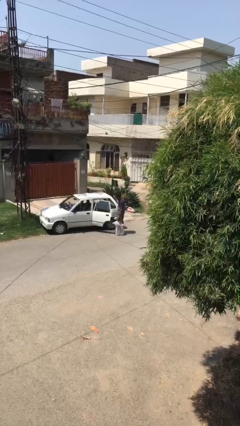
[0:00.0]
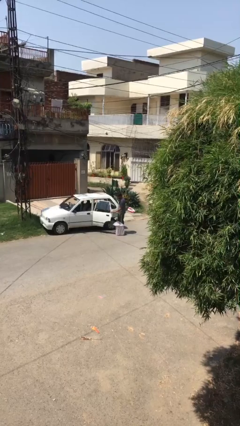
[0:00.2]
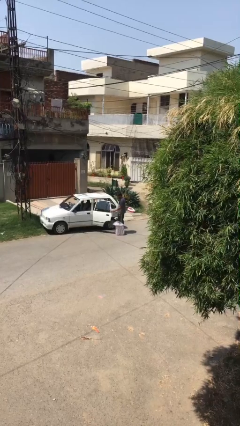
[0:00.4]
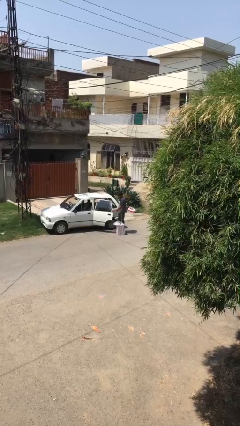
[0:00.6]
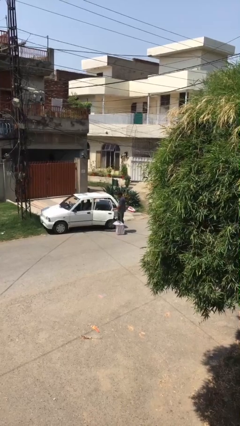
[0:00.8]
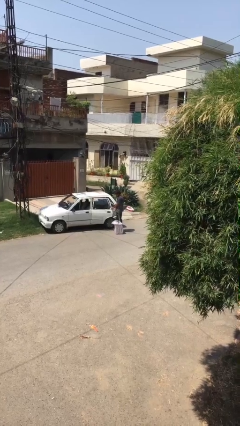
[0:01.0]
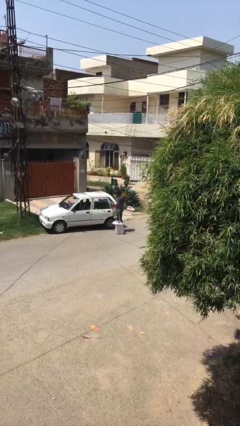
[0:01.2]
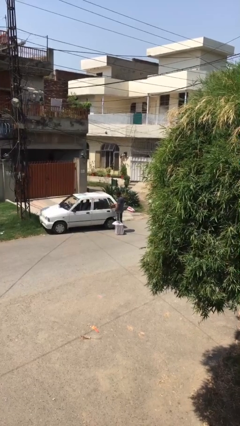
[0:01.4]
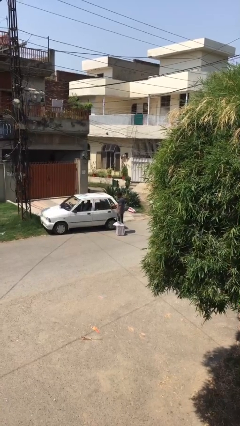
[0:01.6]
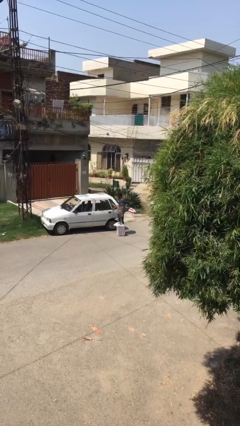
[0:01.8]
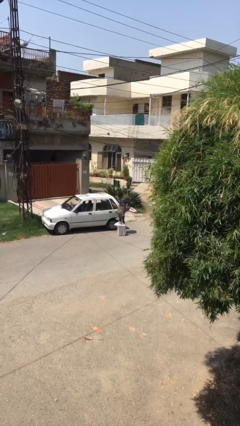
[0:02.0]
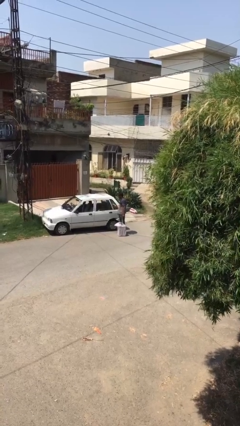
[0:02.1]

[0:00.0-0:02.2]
person closes car door

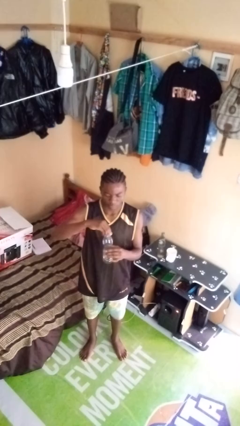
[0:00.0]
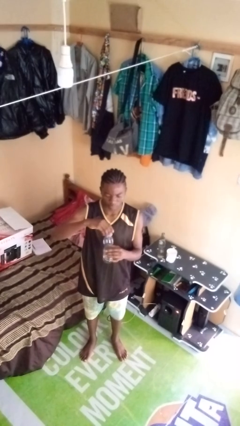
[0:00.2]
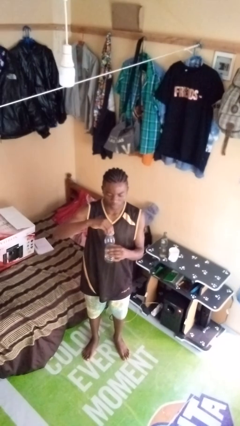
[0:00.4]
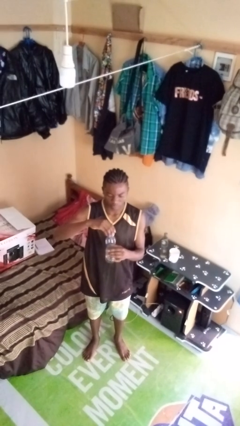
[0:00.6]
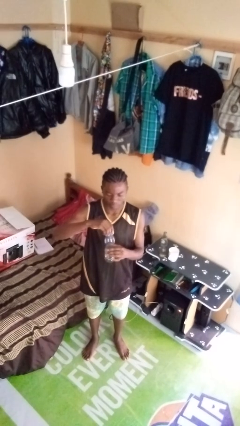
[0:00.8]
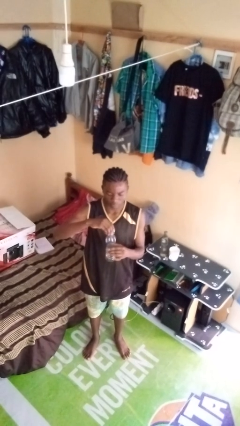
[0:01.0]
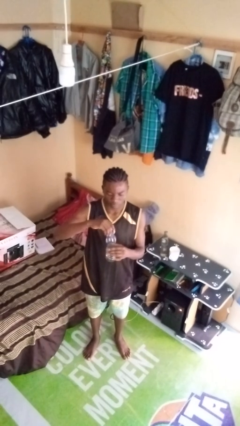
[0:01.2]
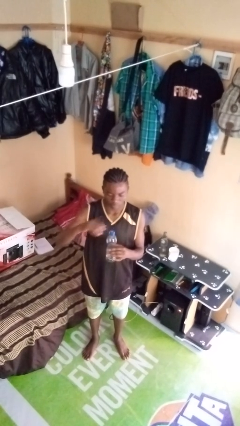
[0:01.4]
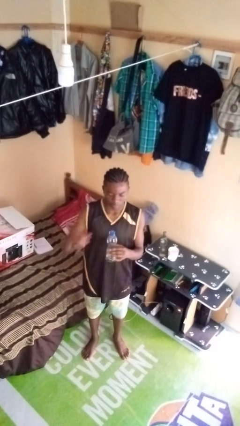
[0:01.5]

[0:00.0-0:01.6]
person screws lid to bottle

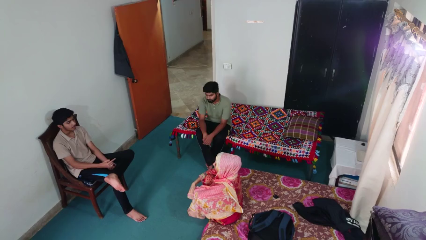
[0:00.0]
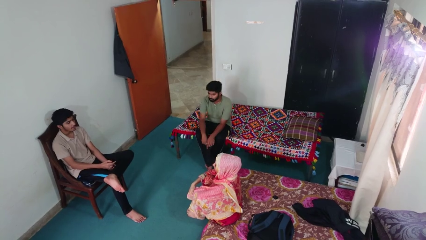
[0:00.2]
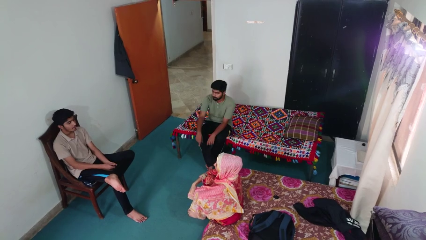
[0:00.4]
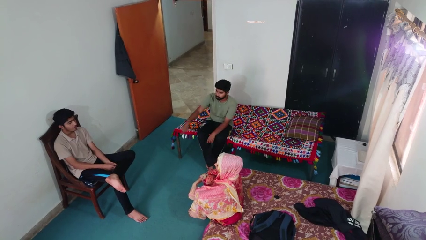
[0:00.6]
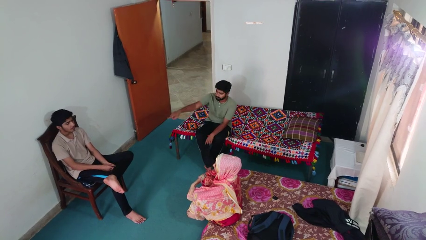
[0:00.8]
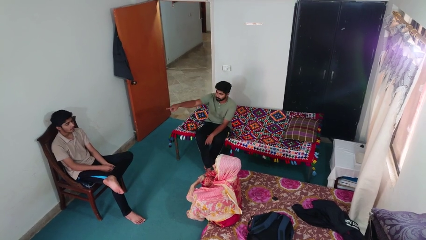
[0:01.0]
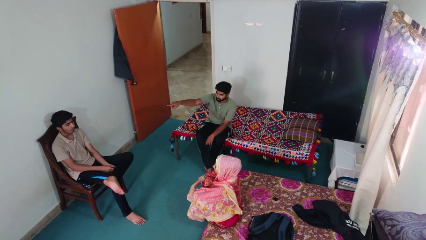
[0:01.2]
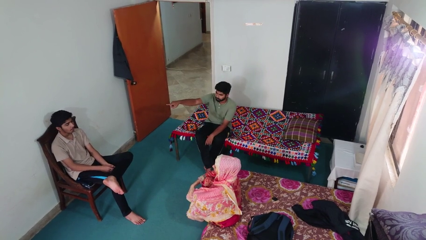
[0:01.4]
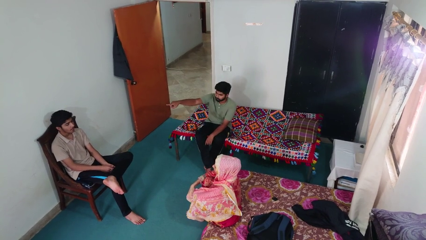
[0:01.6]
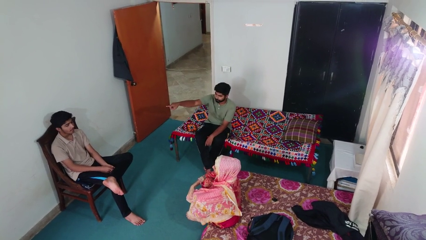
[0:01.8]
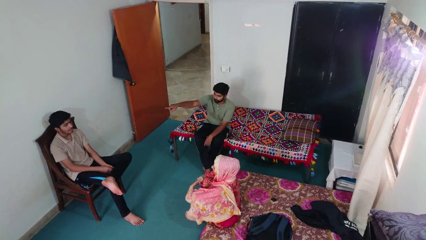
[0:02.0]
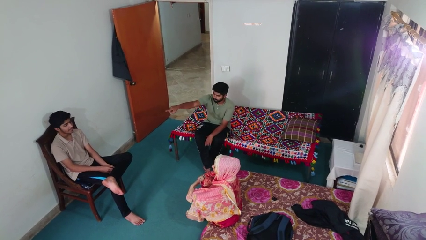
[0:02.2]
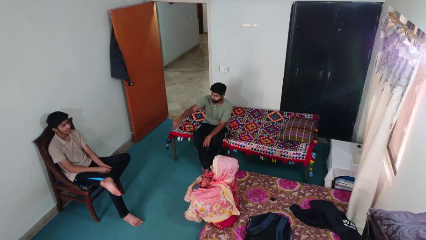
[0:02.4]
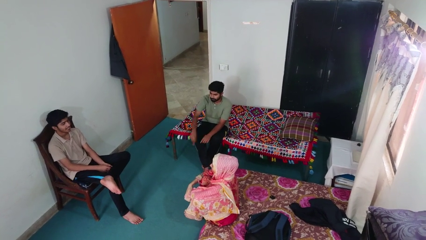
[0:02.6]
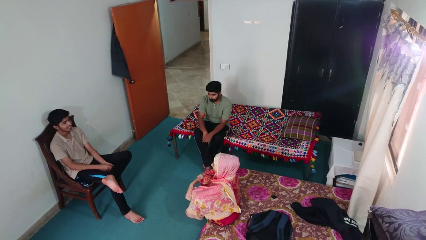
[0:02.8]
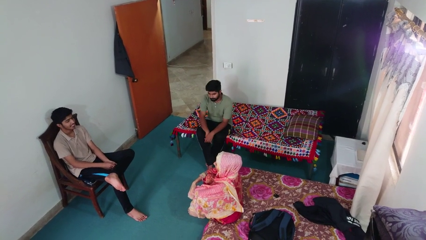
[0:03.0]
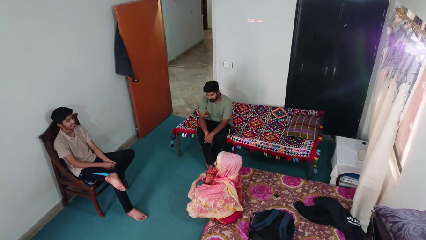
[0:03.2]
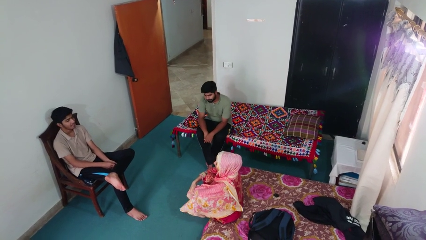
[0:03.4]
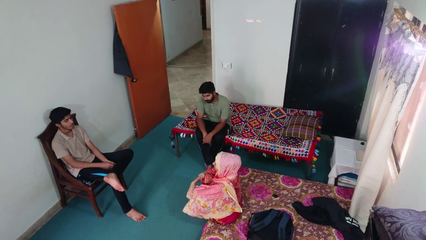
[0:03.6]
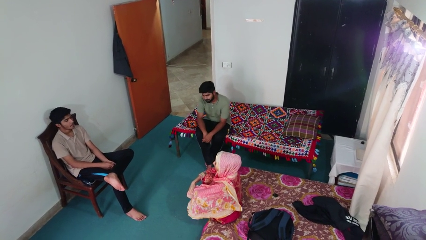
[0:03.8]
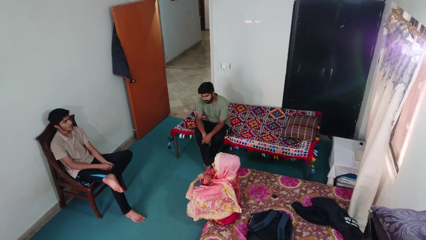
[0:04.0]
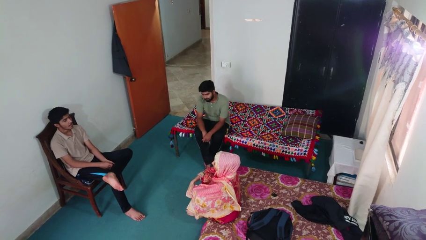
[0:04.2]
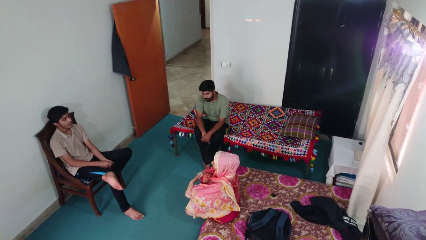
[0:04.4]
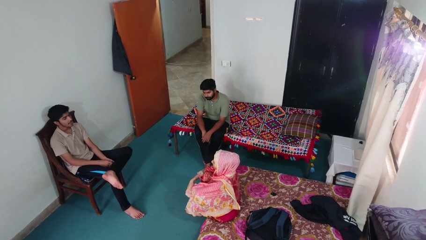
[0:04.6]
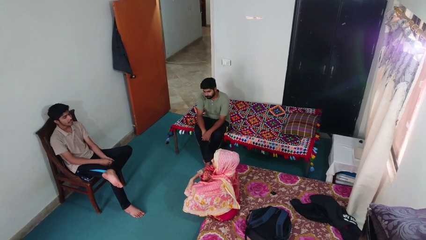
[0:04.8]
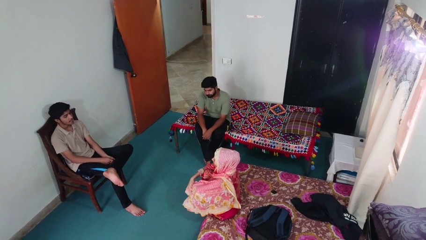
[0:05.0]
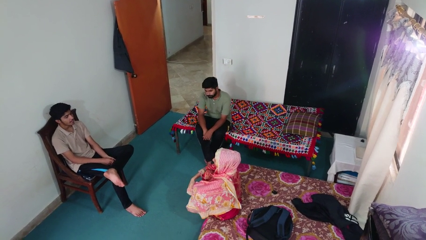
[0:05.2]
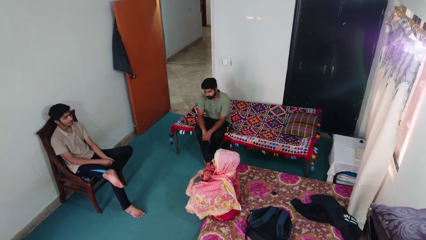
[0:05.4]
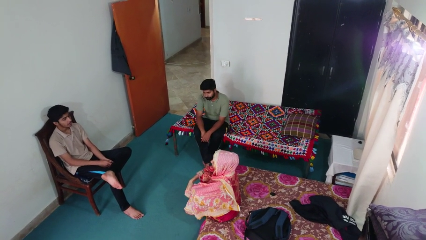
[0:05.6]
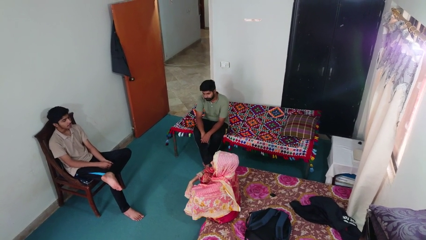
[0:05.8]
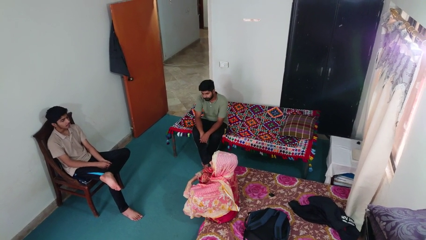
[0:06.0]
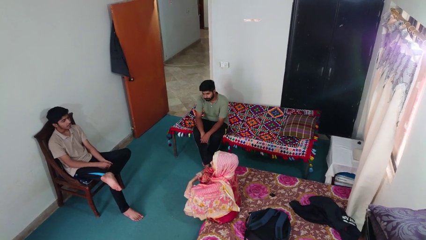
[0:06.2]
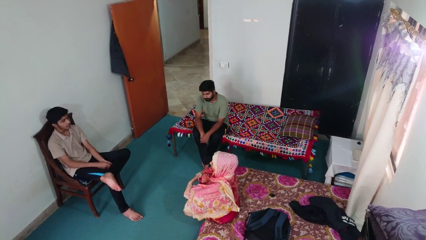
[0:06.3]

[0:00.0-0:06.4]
person points at person

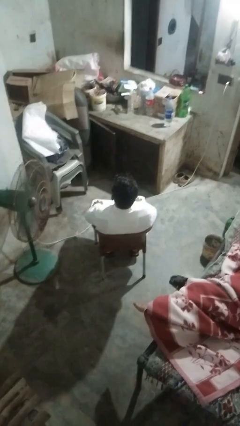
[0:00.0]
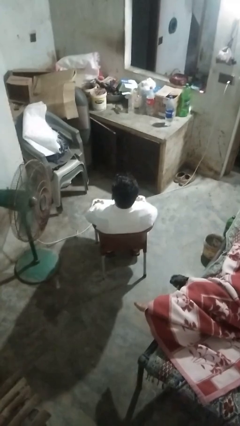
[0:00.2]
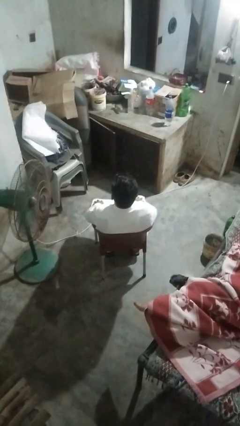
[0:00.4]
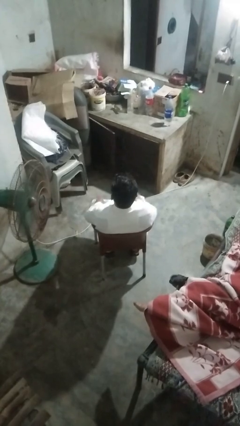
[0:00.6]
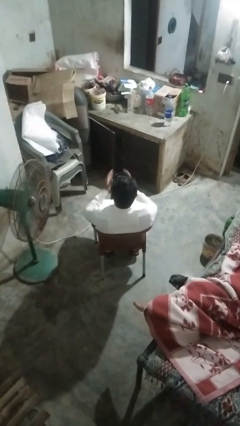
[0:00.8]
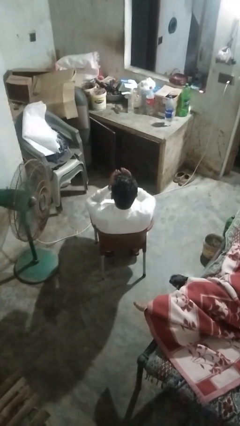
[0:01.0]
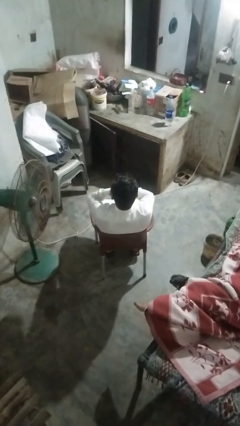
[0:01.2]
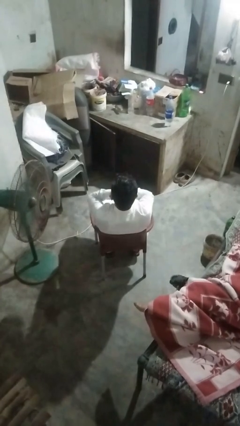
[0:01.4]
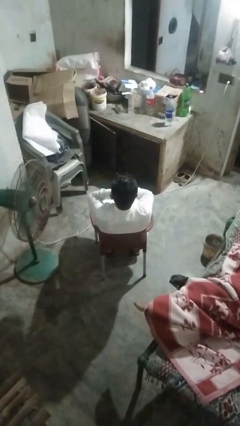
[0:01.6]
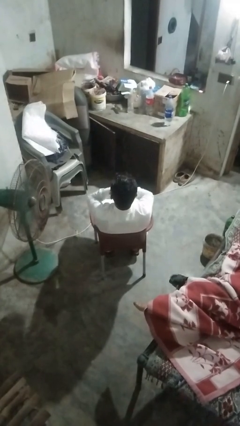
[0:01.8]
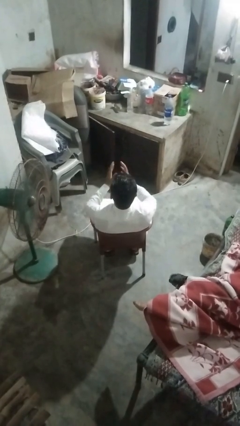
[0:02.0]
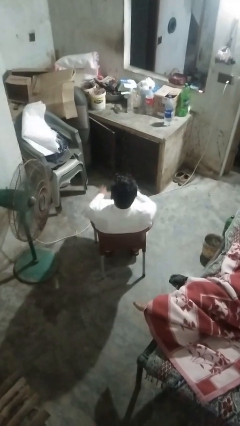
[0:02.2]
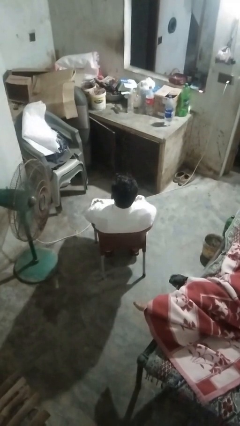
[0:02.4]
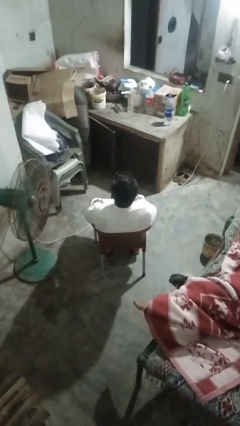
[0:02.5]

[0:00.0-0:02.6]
person yawns

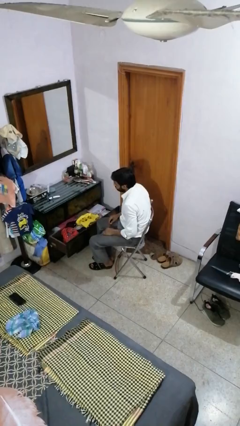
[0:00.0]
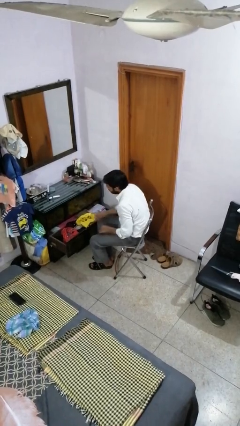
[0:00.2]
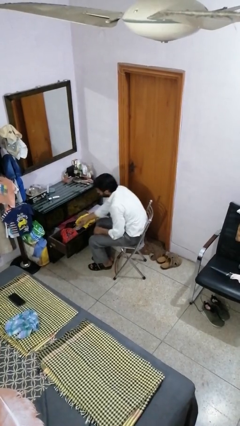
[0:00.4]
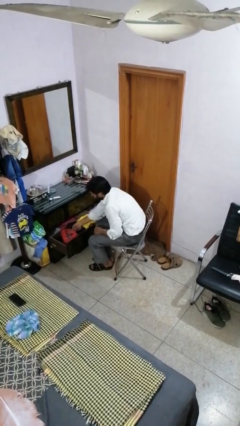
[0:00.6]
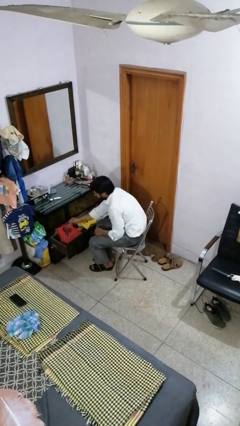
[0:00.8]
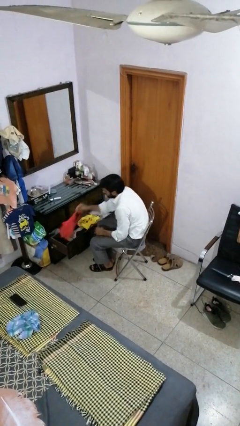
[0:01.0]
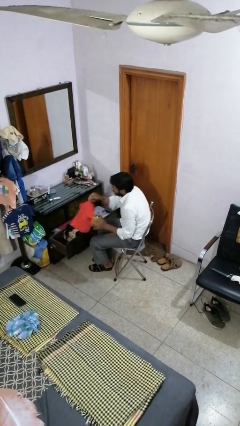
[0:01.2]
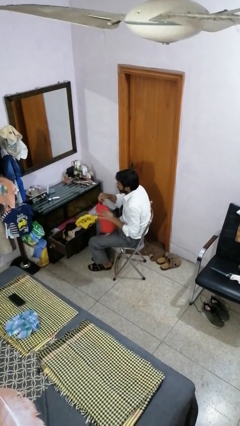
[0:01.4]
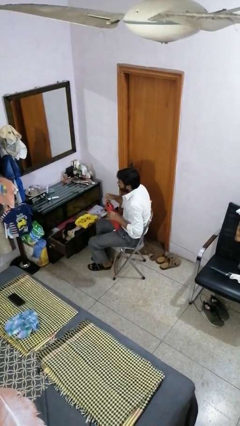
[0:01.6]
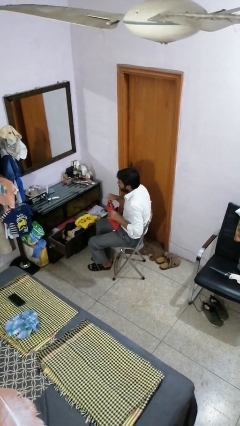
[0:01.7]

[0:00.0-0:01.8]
person takes clothes from dresser

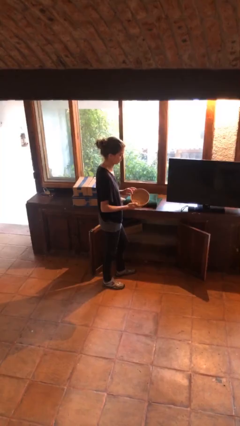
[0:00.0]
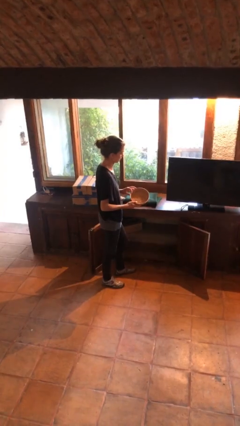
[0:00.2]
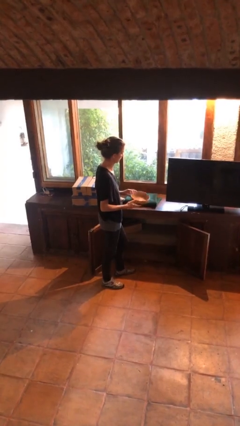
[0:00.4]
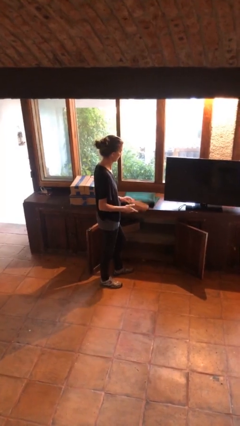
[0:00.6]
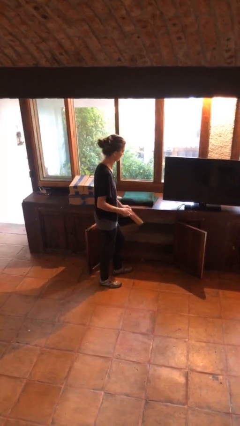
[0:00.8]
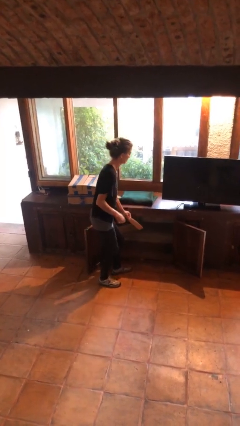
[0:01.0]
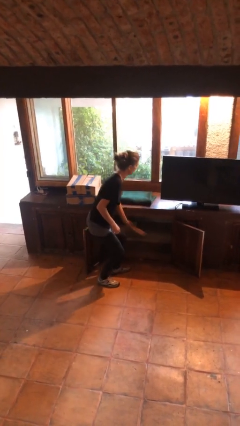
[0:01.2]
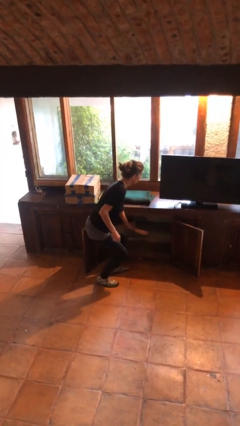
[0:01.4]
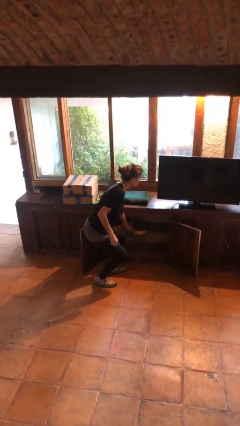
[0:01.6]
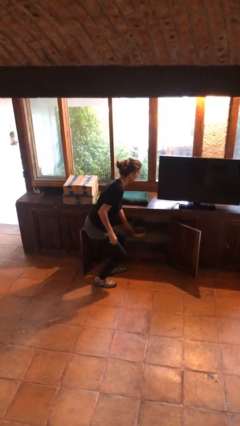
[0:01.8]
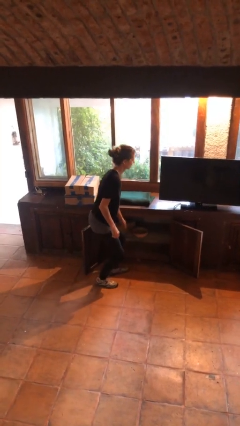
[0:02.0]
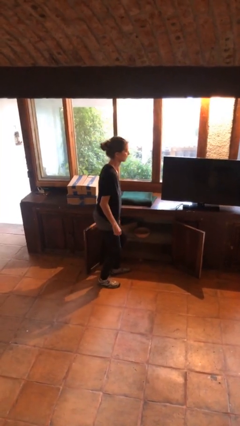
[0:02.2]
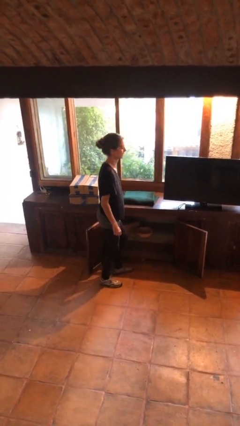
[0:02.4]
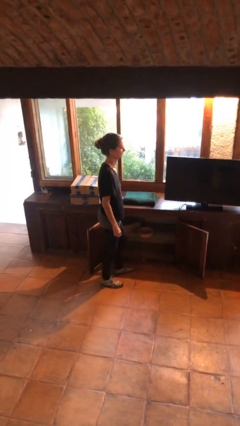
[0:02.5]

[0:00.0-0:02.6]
person puts down object into cabinet
